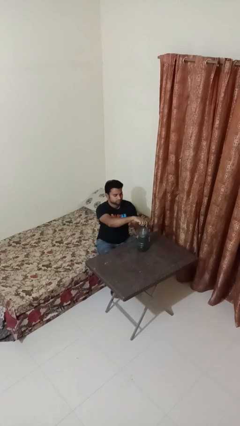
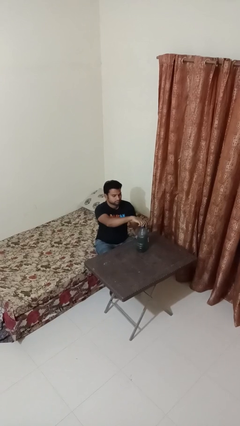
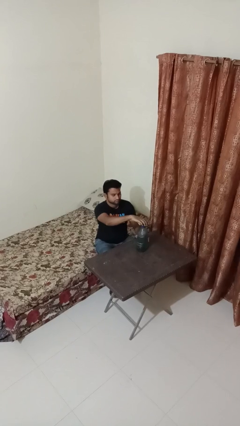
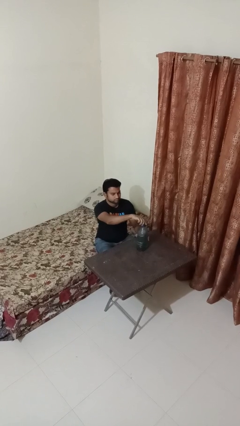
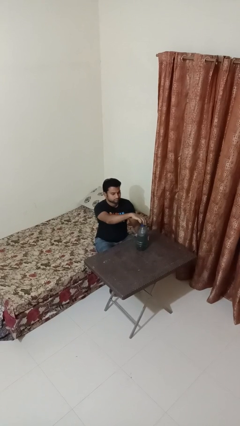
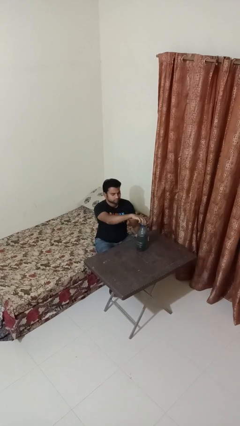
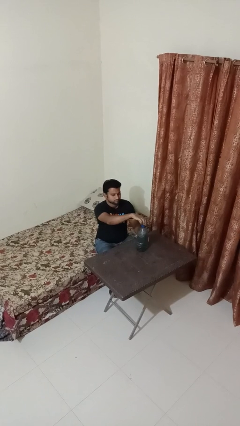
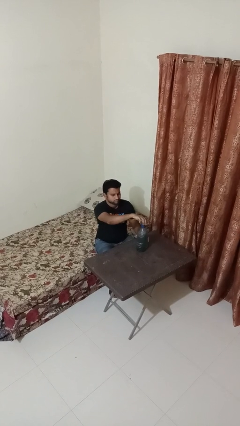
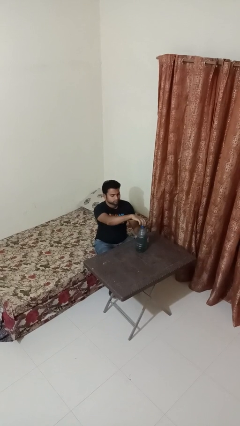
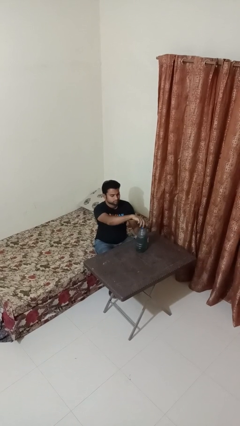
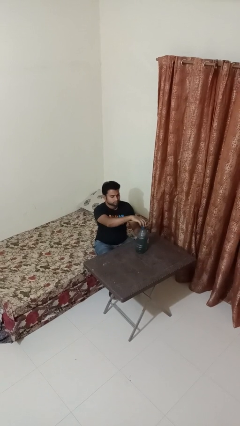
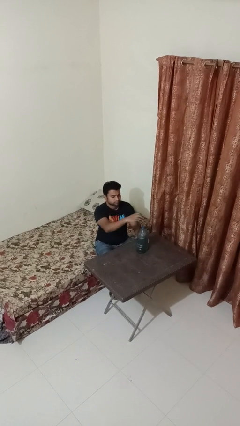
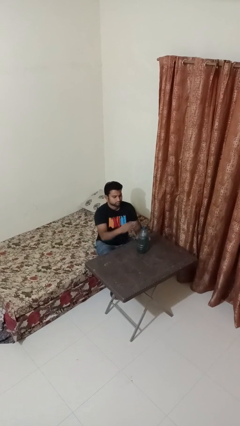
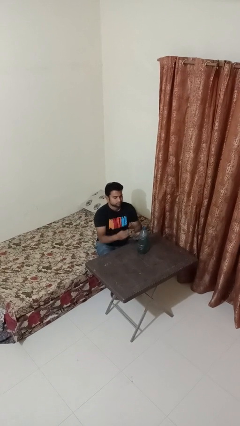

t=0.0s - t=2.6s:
person unscrews lid from bottle

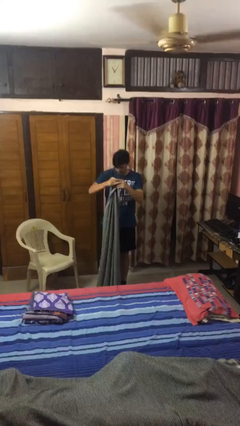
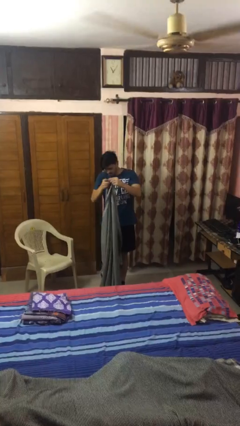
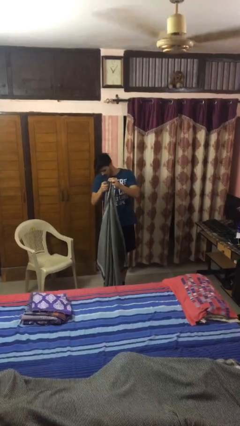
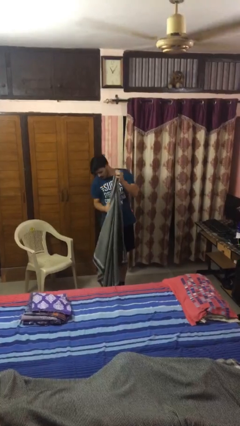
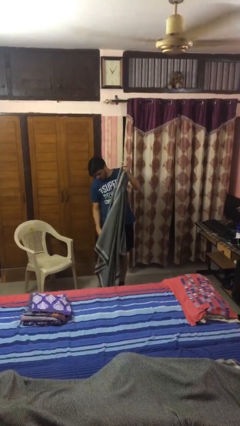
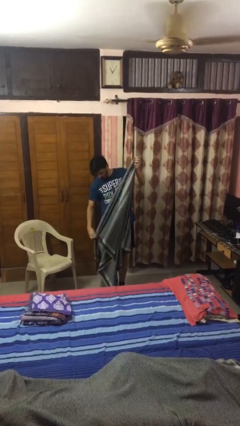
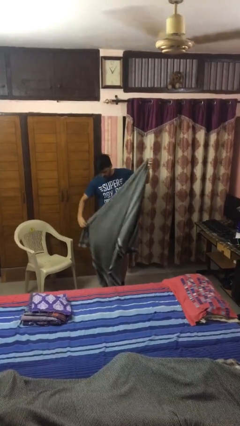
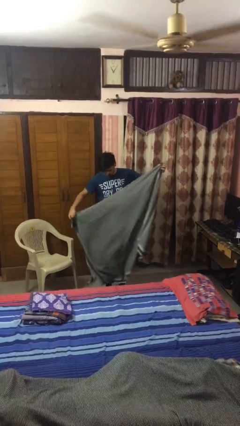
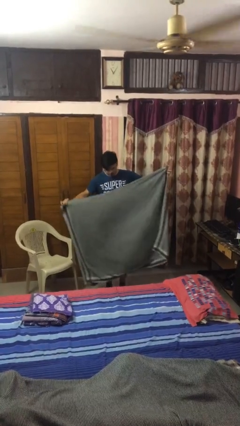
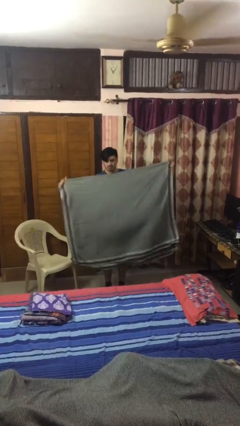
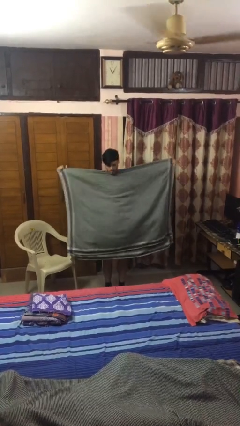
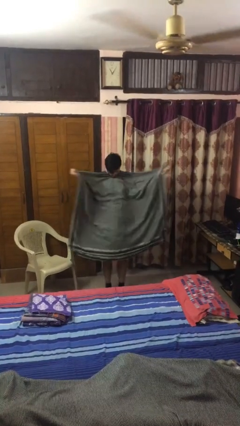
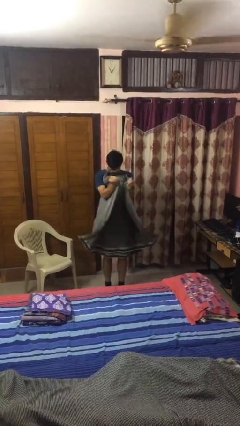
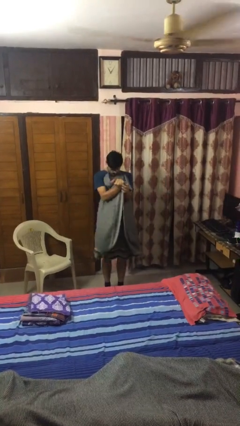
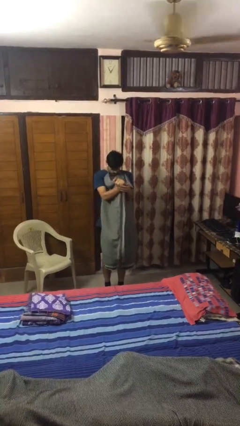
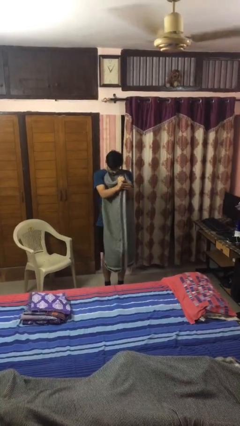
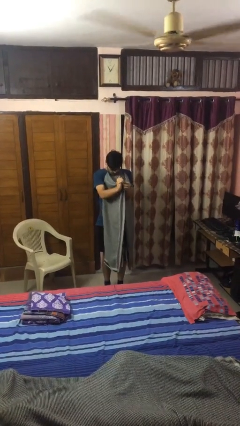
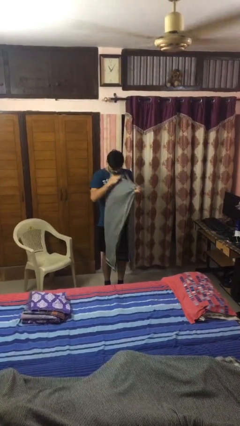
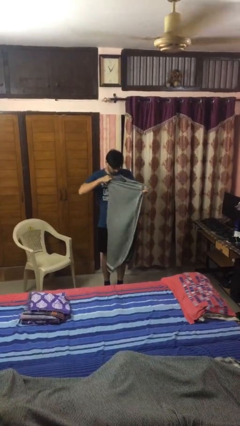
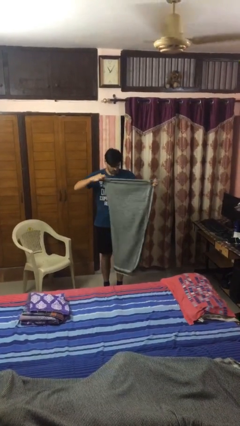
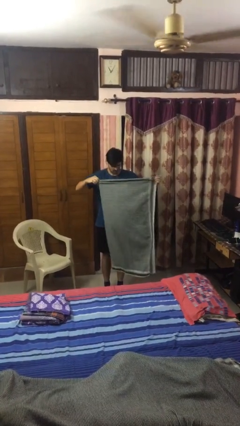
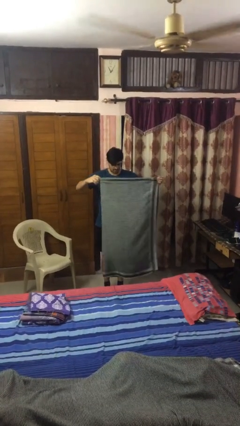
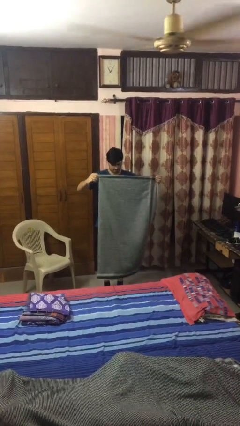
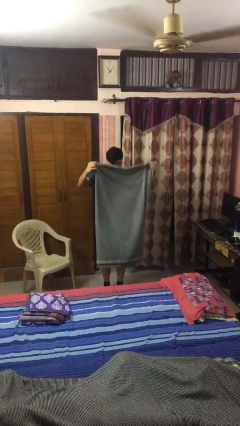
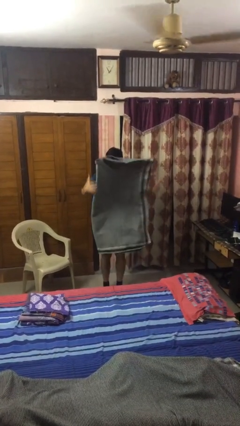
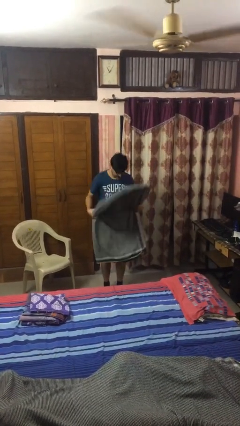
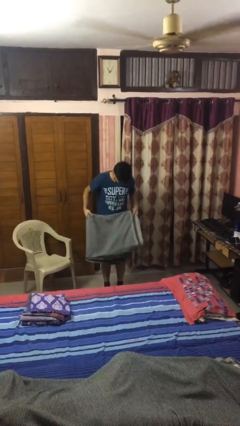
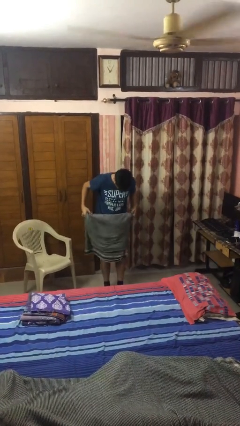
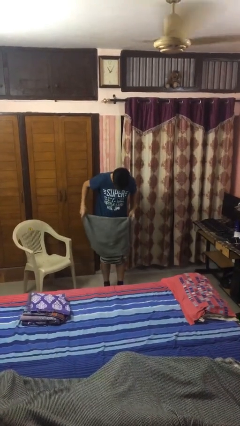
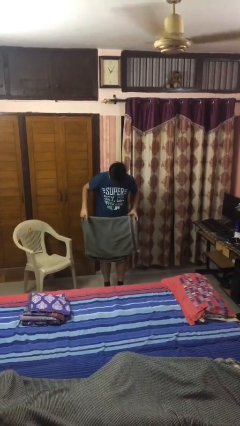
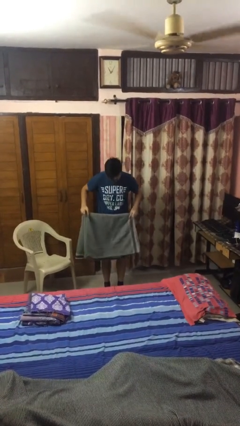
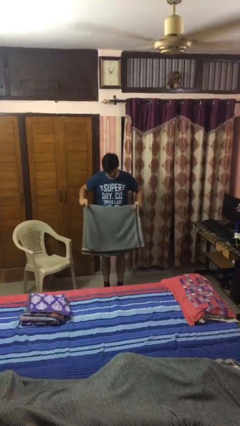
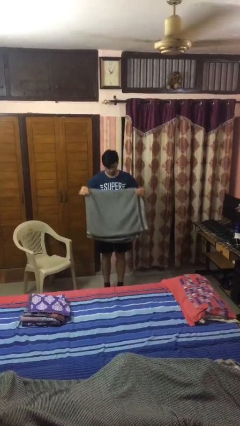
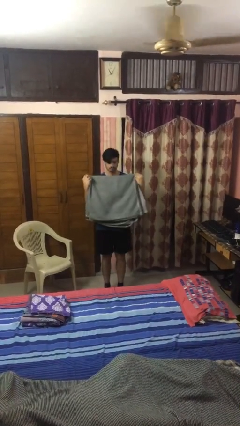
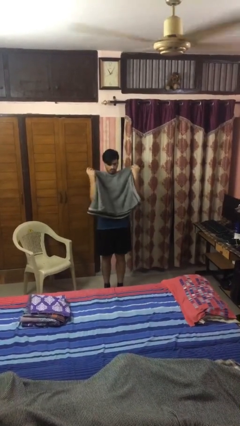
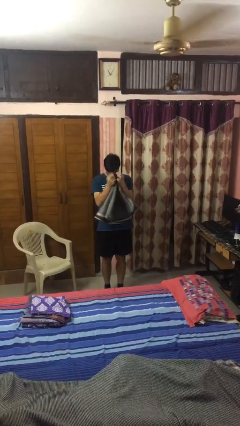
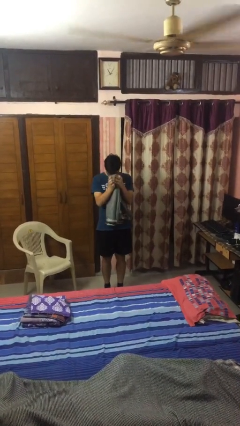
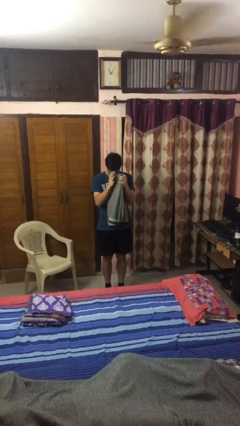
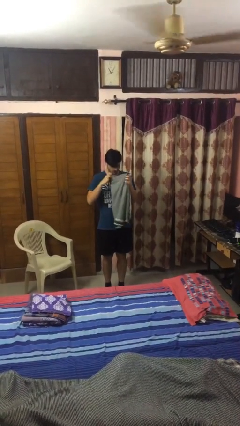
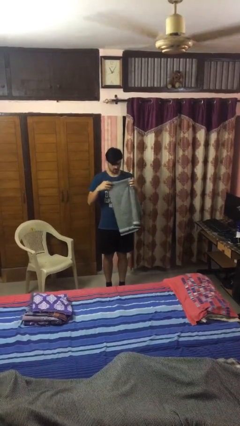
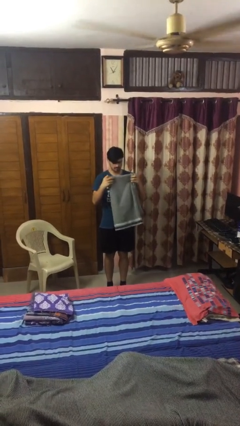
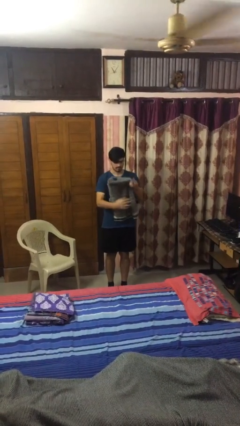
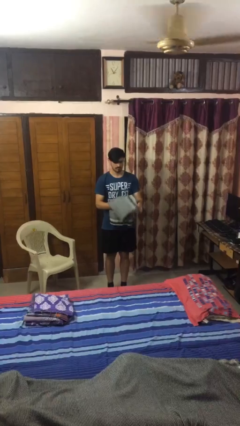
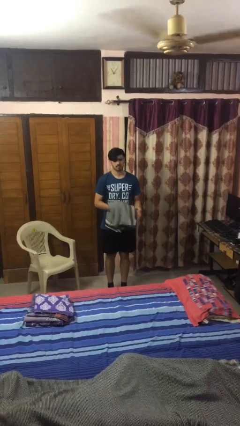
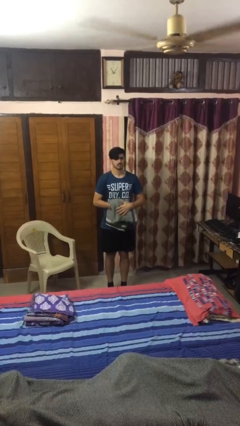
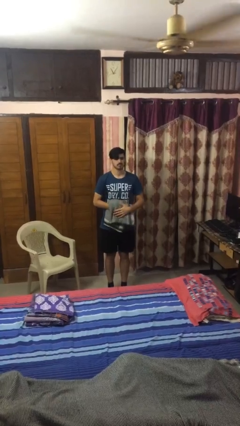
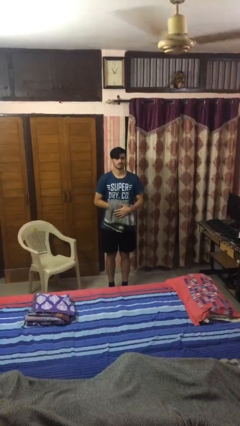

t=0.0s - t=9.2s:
person folds blanket

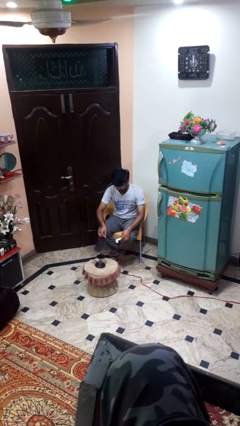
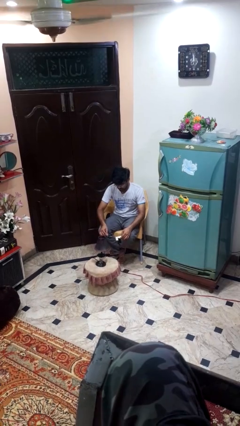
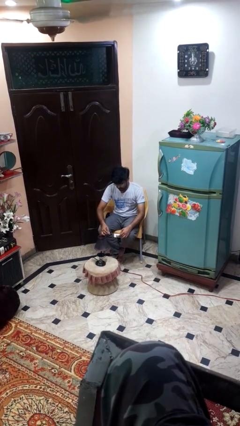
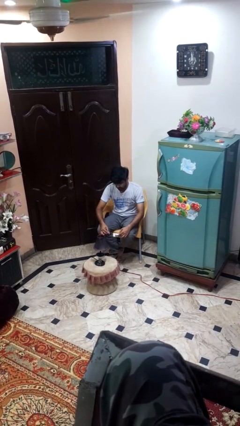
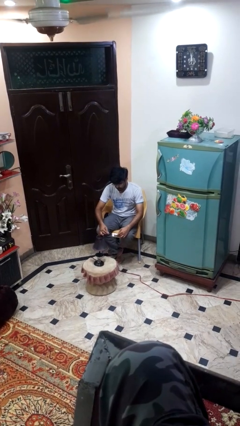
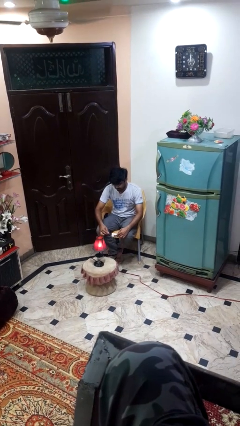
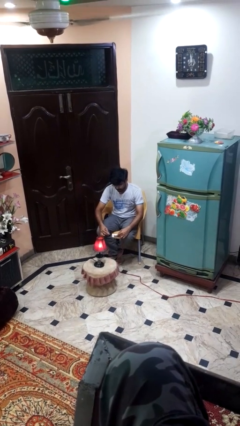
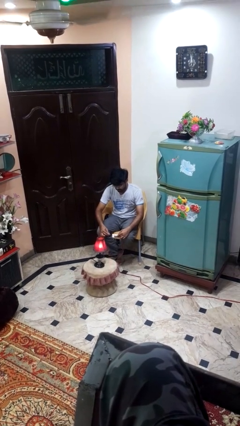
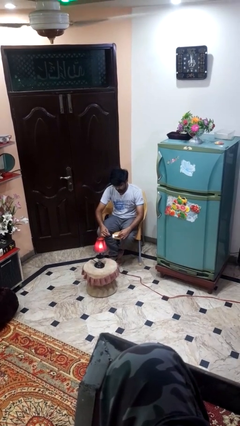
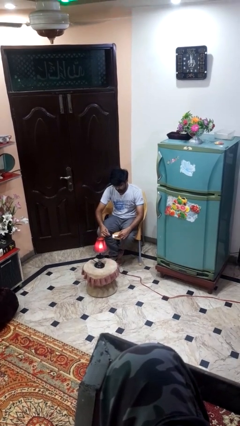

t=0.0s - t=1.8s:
person turns on lamp

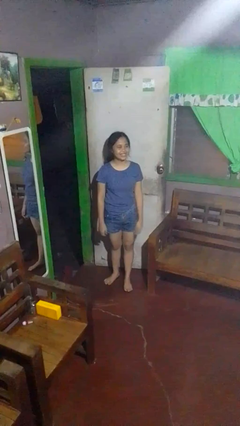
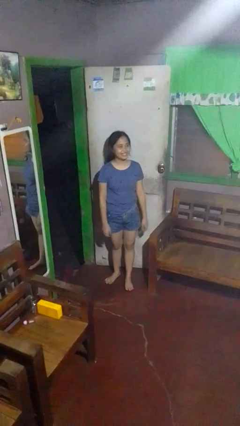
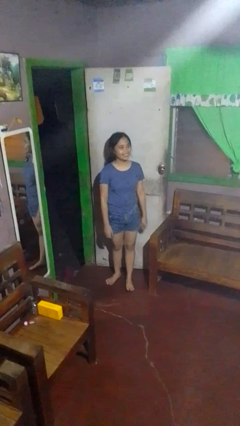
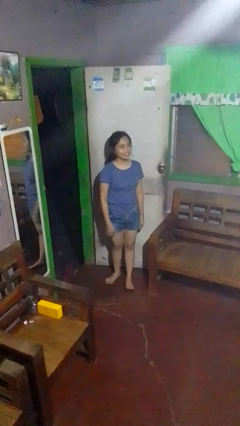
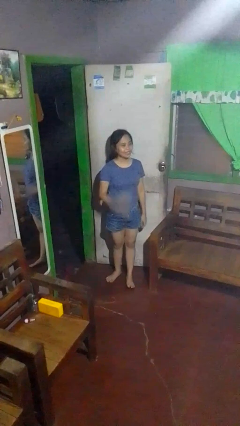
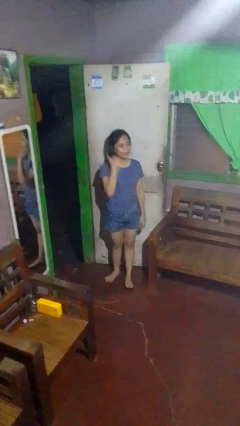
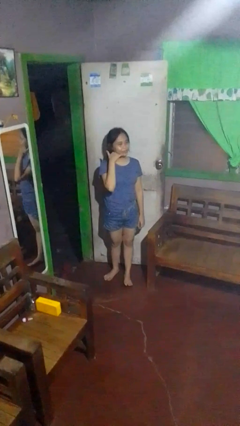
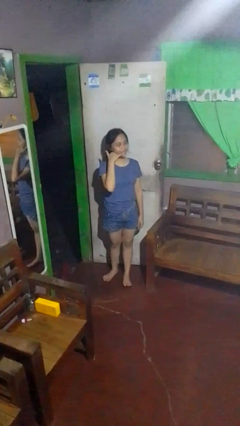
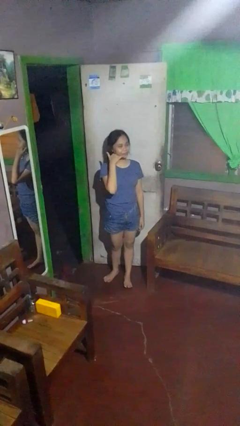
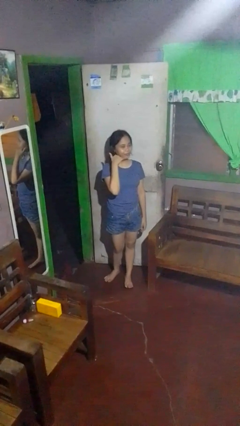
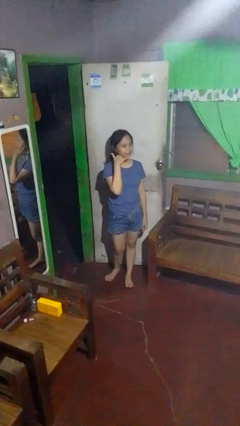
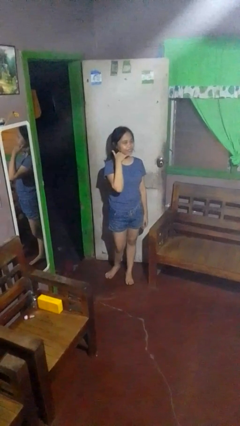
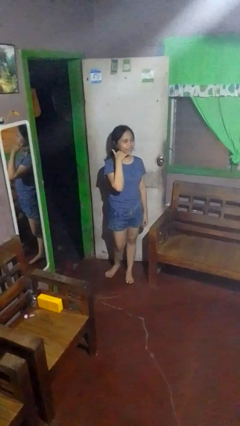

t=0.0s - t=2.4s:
person gestures call me

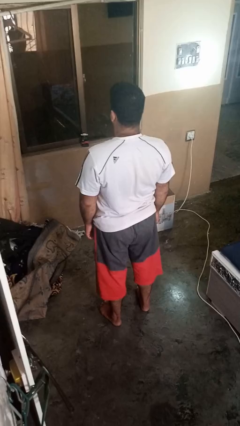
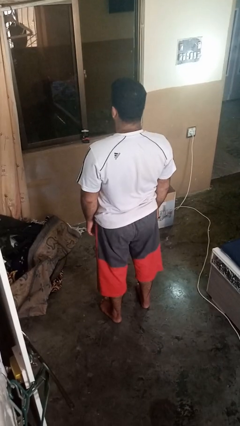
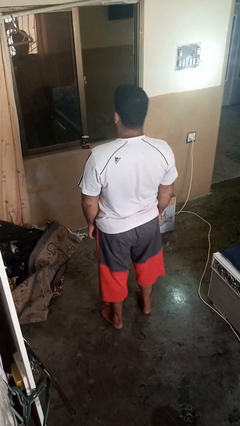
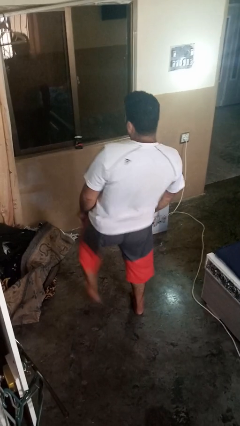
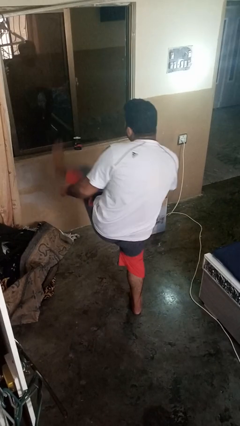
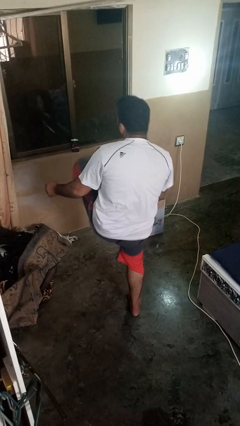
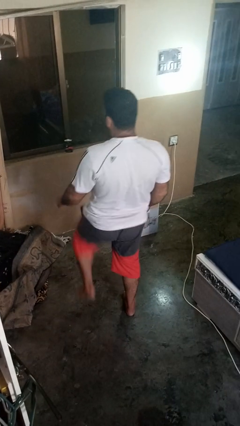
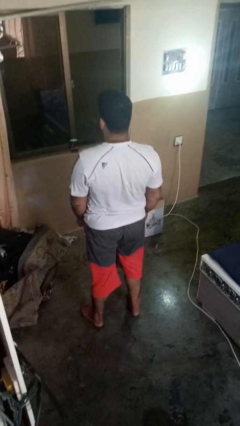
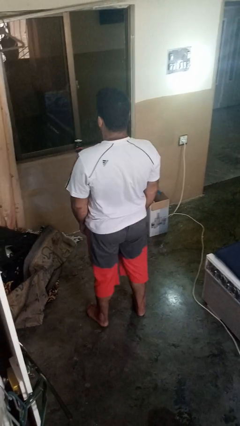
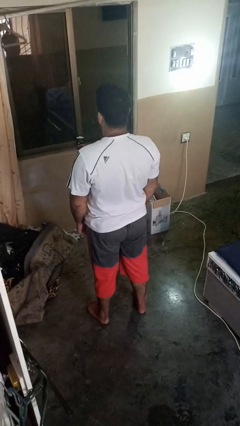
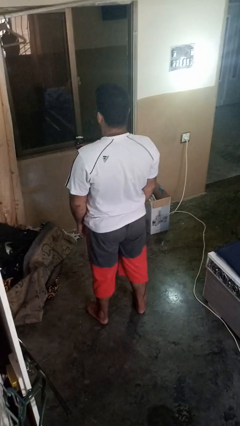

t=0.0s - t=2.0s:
person karate kicks
